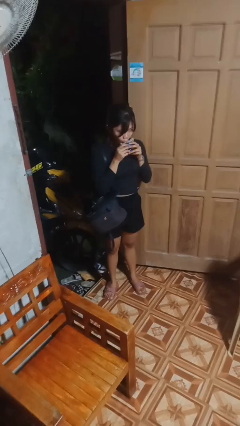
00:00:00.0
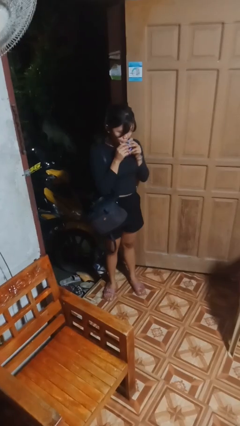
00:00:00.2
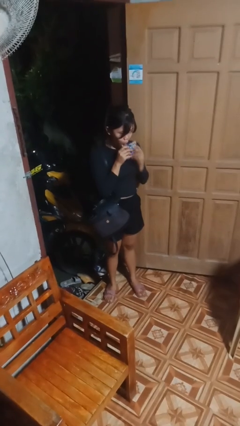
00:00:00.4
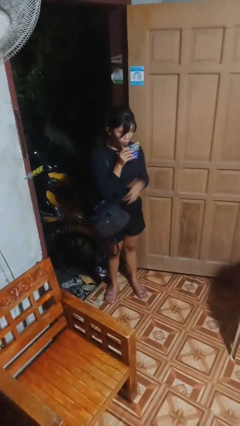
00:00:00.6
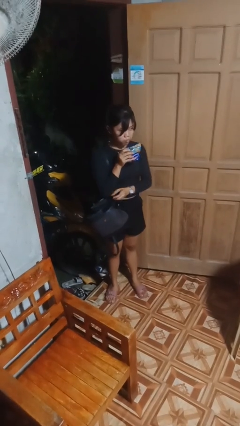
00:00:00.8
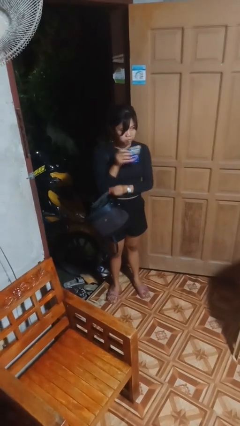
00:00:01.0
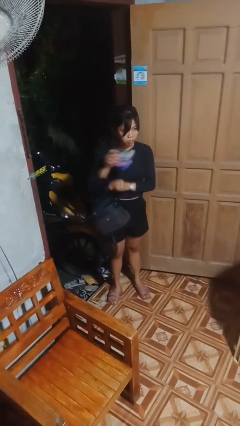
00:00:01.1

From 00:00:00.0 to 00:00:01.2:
person eats snack from bag

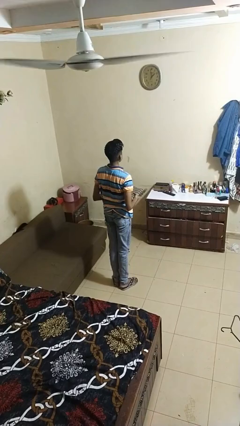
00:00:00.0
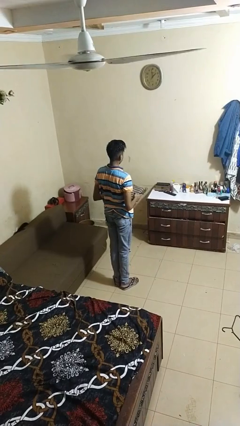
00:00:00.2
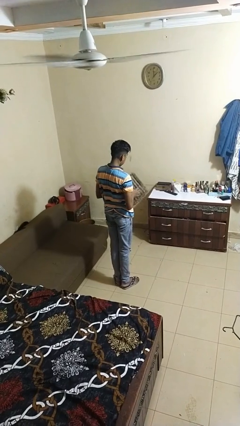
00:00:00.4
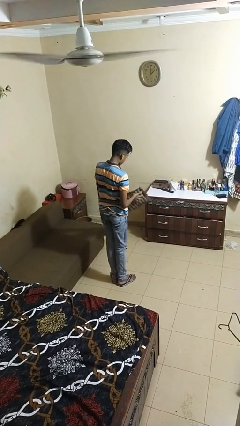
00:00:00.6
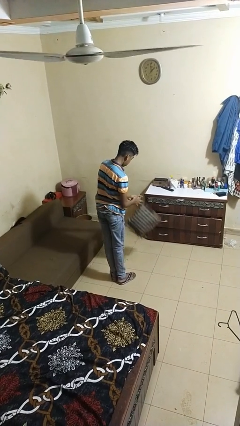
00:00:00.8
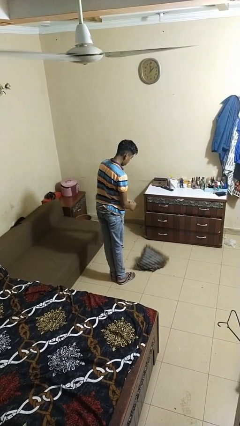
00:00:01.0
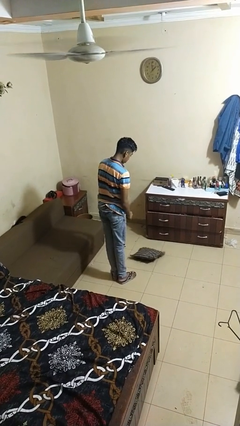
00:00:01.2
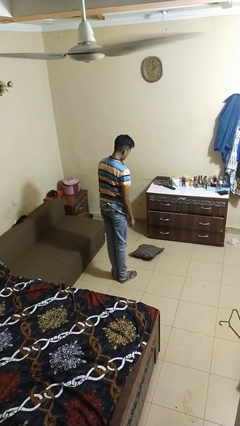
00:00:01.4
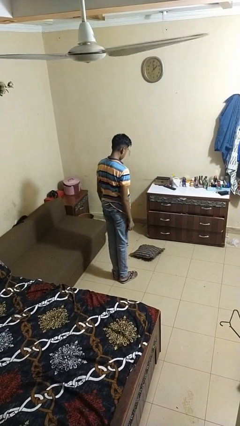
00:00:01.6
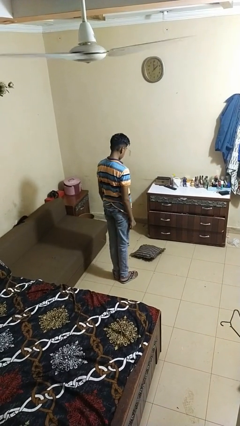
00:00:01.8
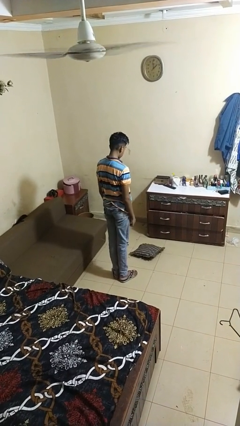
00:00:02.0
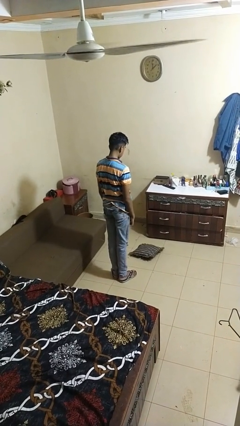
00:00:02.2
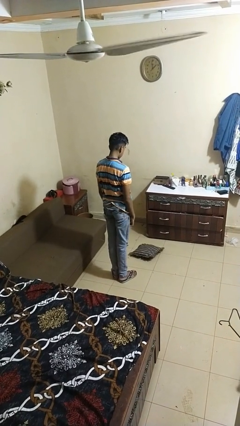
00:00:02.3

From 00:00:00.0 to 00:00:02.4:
person drops object

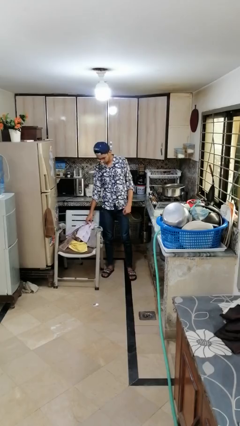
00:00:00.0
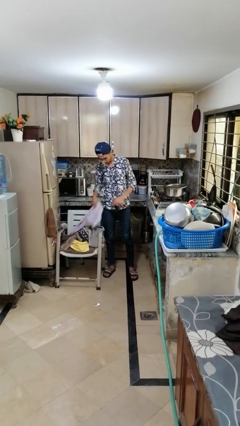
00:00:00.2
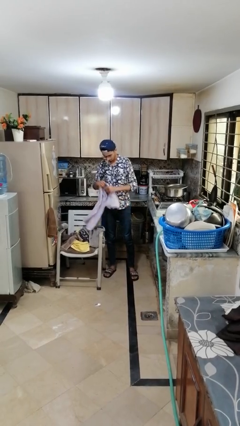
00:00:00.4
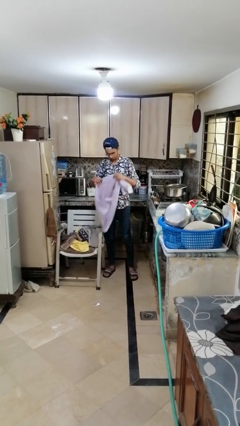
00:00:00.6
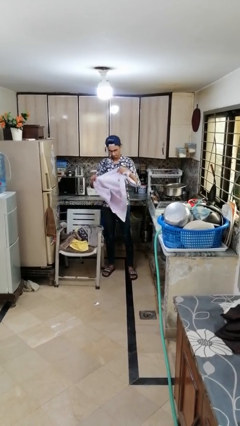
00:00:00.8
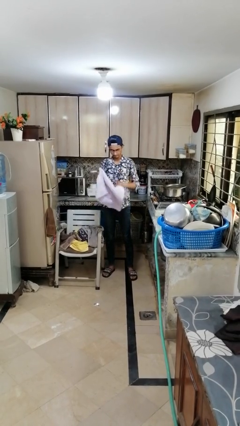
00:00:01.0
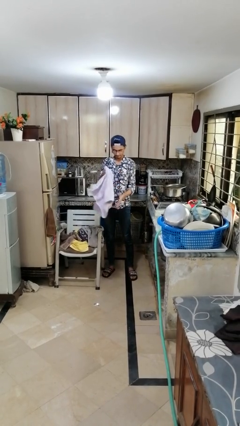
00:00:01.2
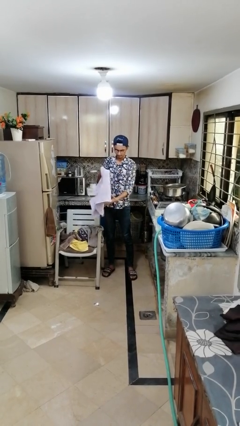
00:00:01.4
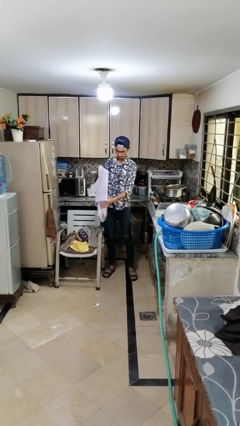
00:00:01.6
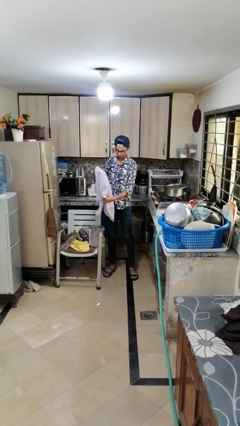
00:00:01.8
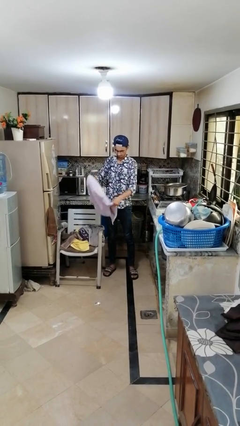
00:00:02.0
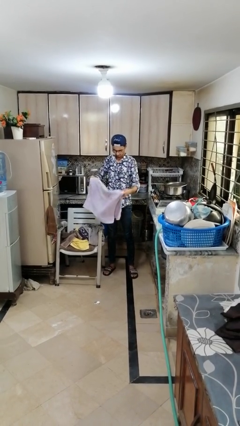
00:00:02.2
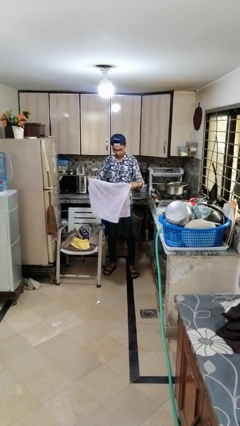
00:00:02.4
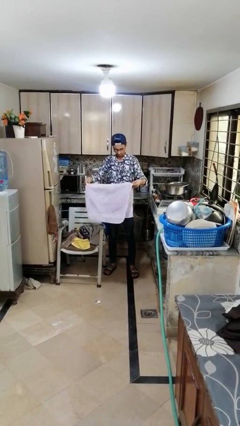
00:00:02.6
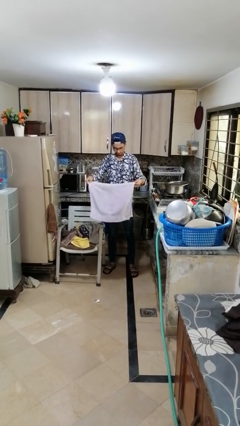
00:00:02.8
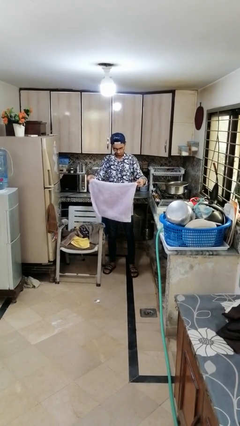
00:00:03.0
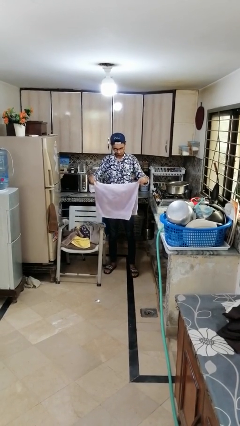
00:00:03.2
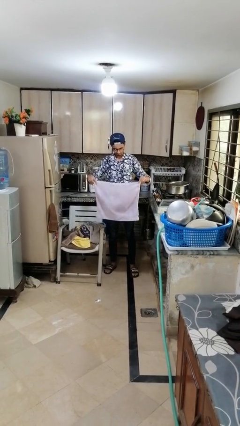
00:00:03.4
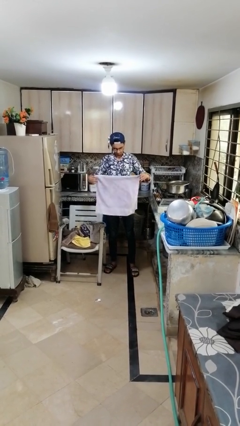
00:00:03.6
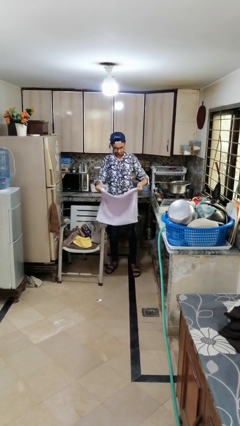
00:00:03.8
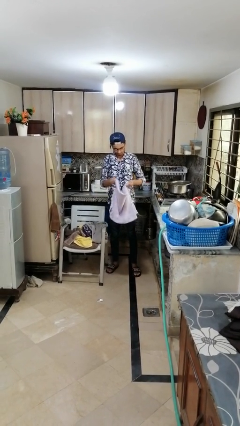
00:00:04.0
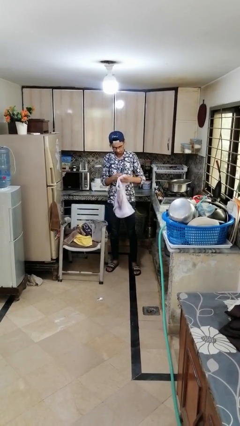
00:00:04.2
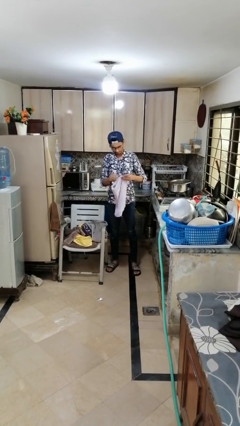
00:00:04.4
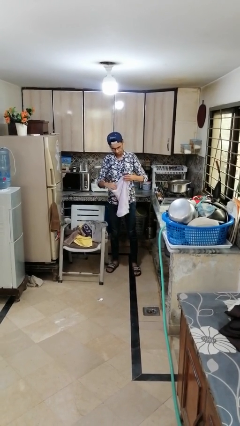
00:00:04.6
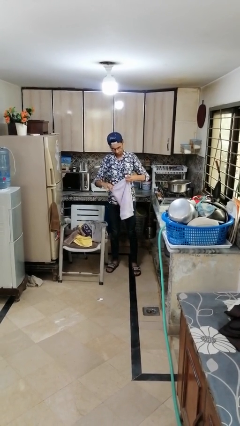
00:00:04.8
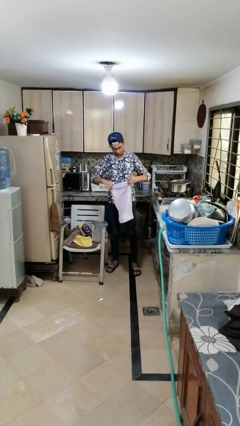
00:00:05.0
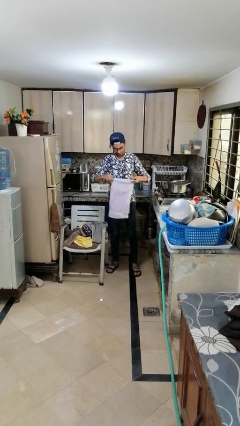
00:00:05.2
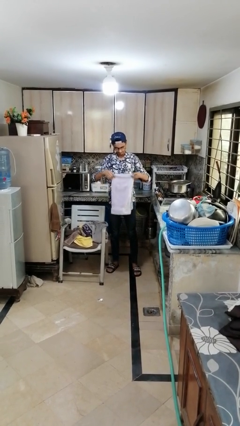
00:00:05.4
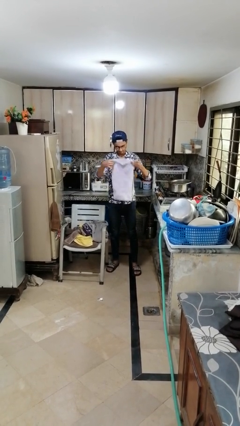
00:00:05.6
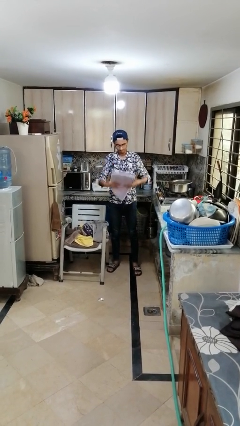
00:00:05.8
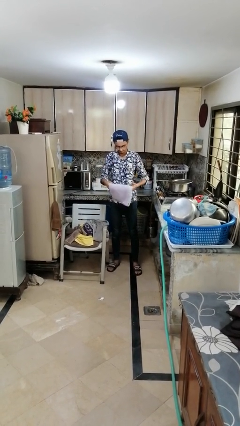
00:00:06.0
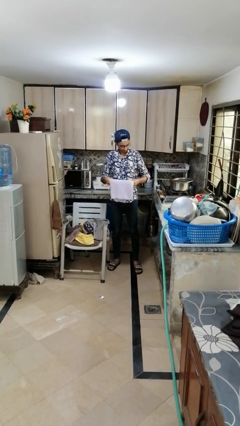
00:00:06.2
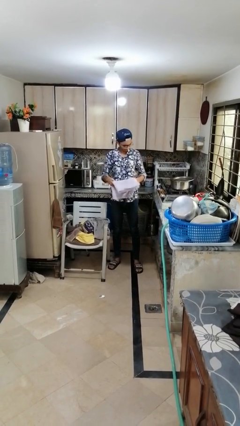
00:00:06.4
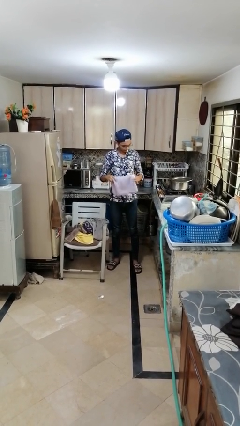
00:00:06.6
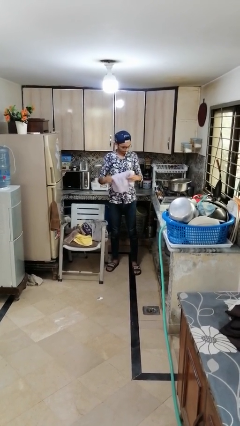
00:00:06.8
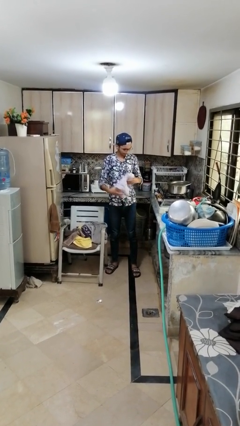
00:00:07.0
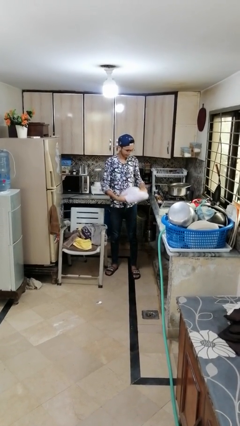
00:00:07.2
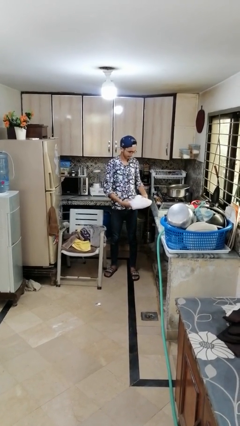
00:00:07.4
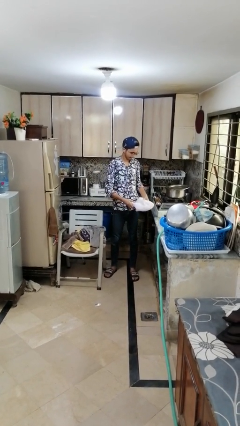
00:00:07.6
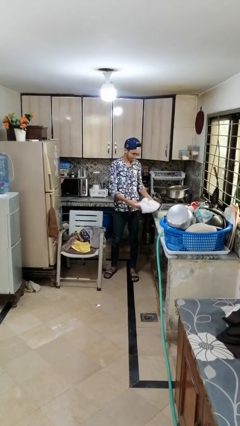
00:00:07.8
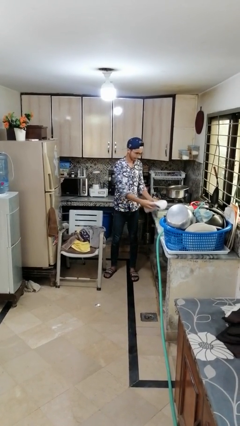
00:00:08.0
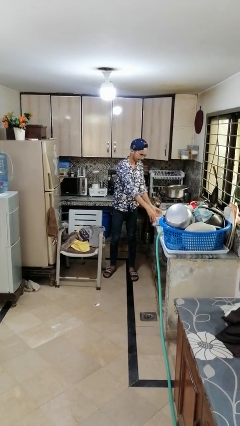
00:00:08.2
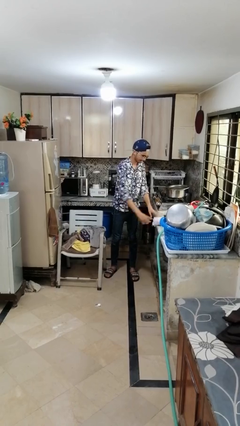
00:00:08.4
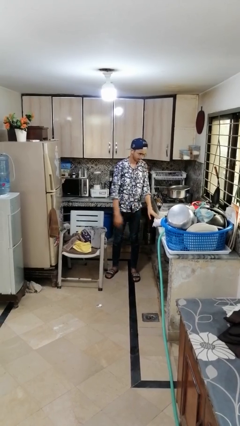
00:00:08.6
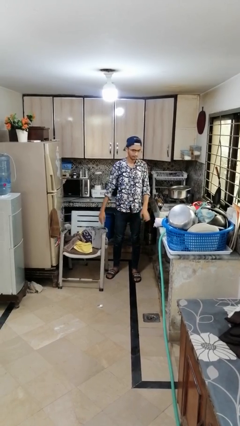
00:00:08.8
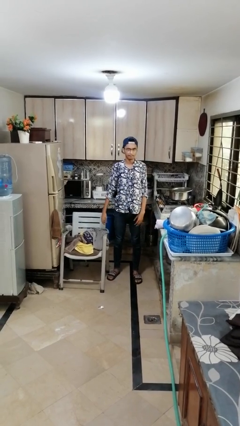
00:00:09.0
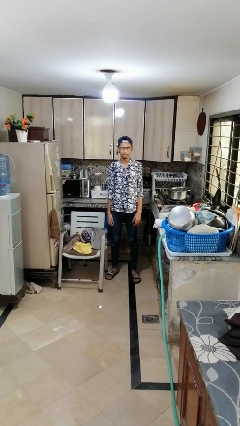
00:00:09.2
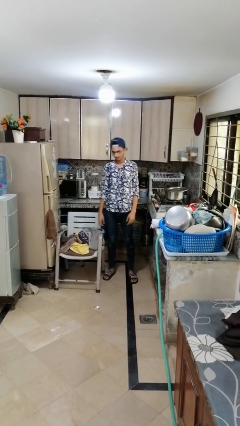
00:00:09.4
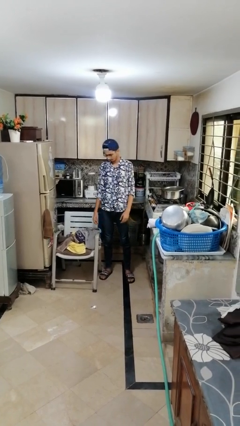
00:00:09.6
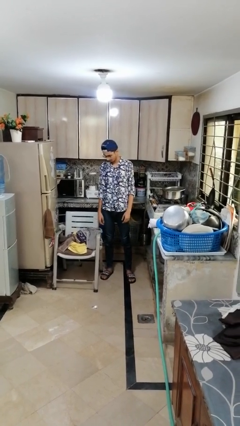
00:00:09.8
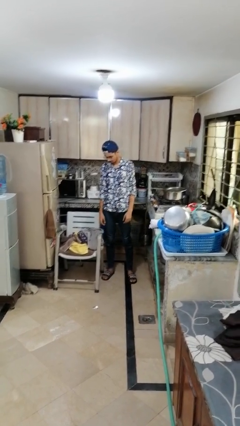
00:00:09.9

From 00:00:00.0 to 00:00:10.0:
person folds towel

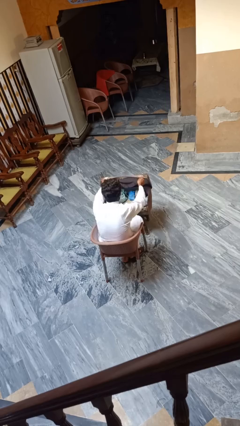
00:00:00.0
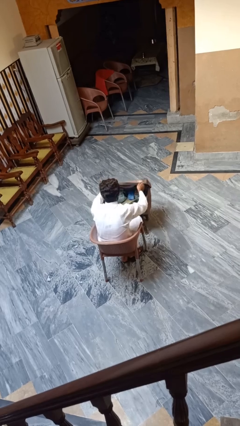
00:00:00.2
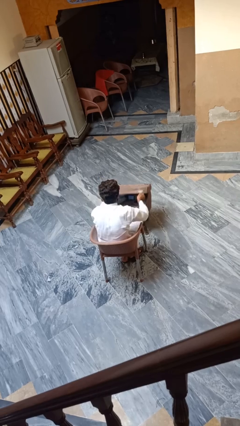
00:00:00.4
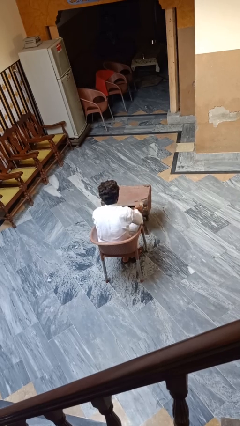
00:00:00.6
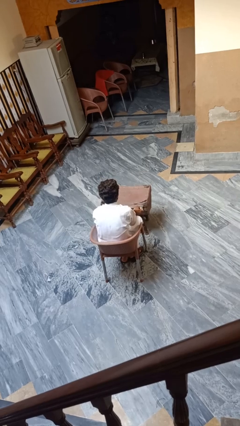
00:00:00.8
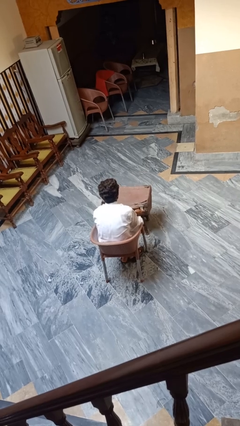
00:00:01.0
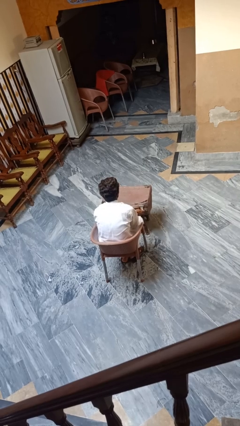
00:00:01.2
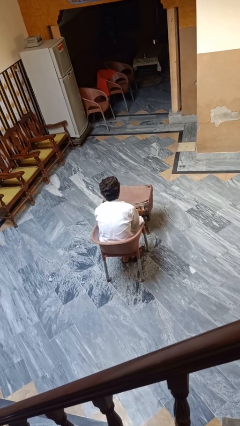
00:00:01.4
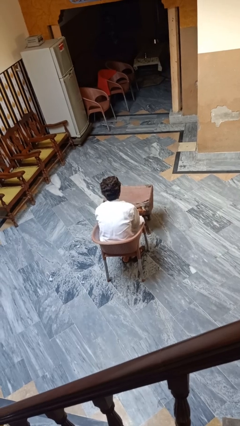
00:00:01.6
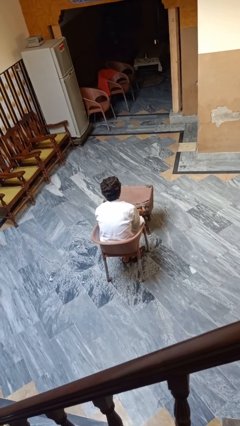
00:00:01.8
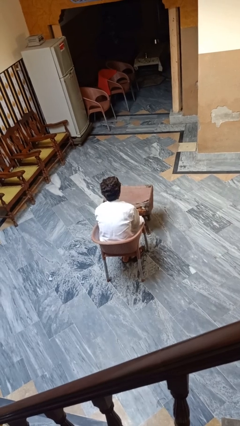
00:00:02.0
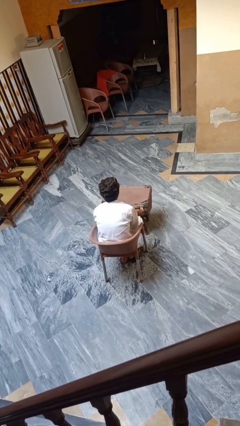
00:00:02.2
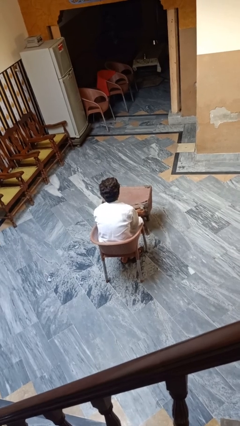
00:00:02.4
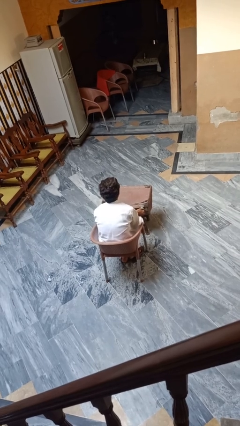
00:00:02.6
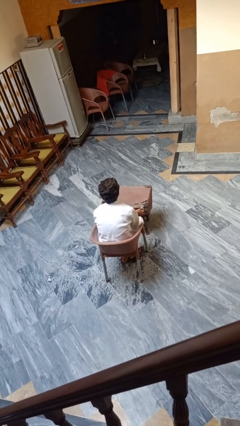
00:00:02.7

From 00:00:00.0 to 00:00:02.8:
person closes suitcase

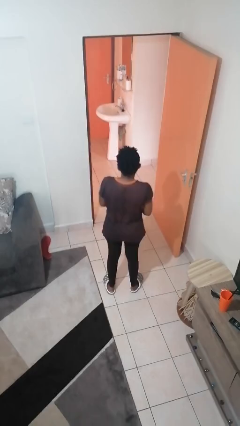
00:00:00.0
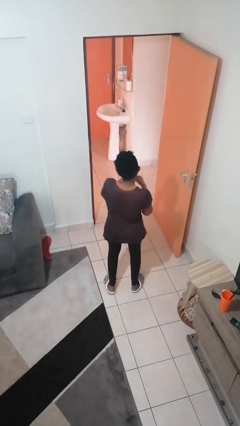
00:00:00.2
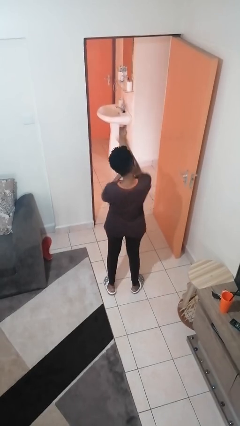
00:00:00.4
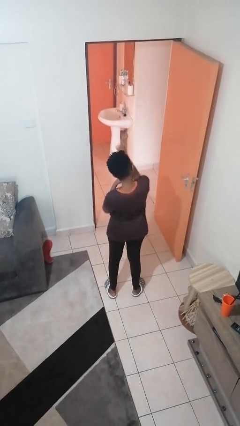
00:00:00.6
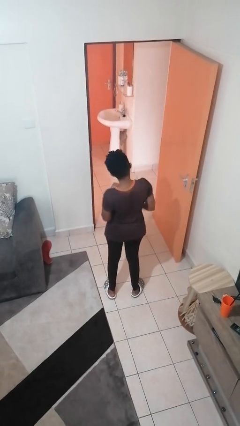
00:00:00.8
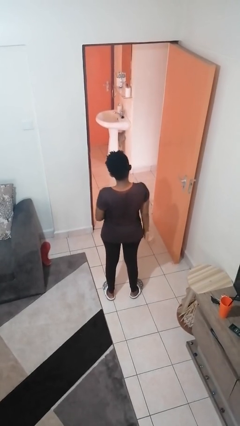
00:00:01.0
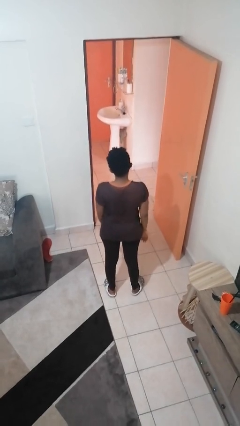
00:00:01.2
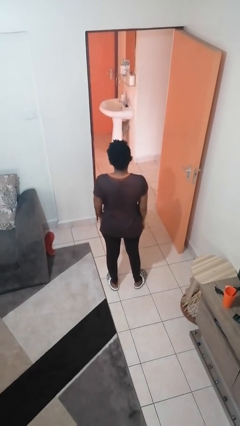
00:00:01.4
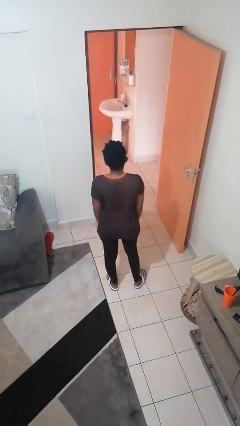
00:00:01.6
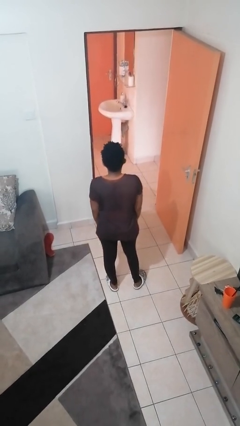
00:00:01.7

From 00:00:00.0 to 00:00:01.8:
person punches
